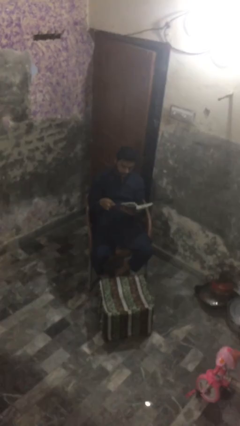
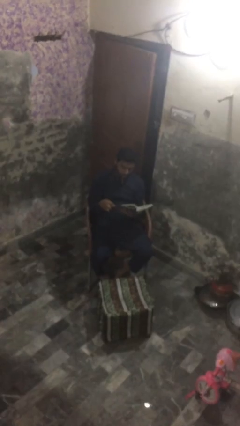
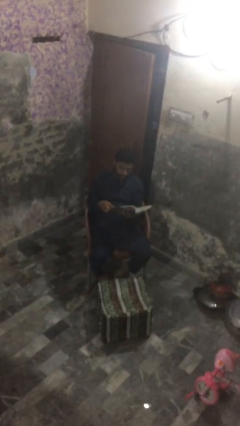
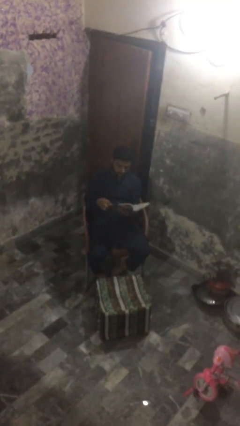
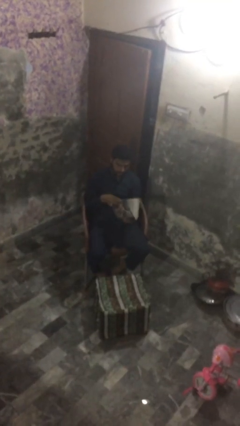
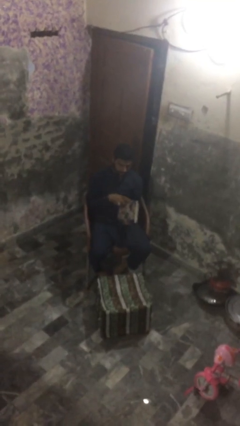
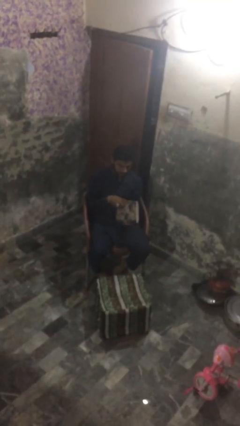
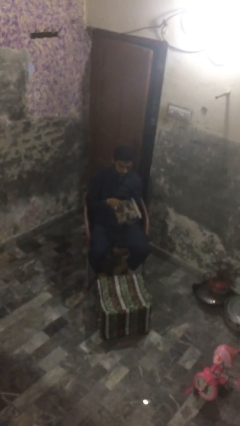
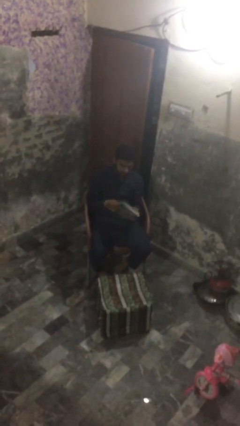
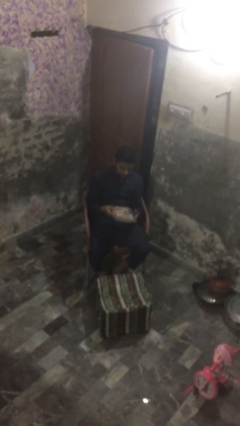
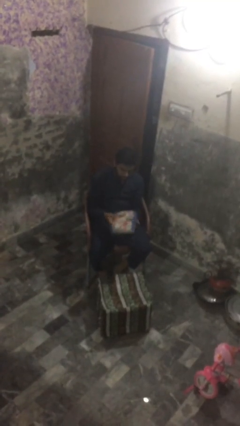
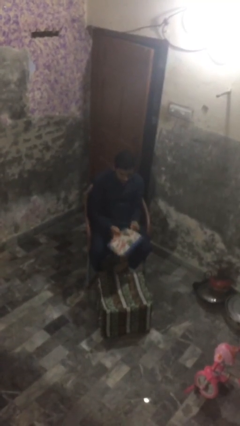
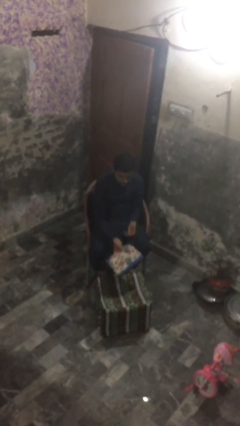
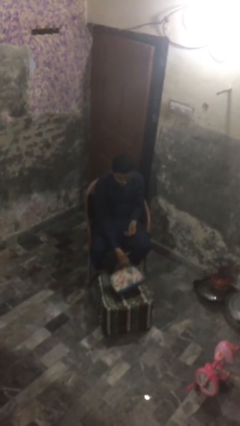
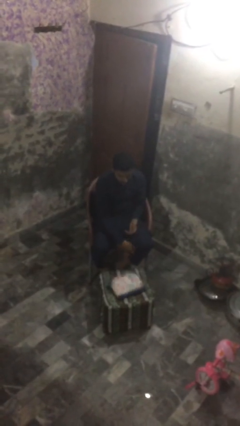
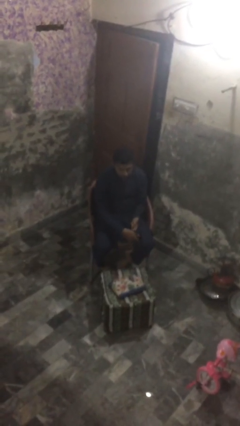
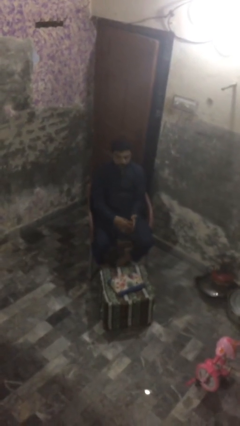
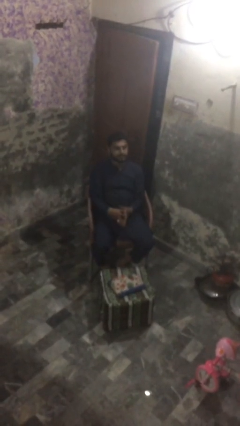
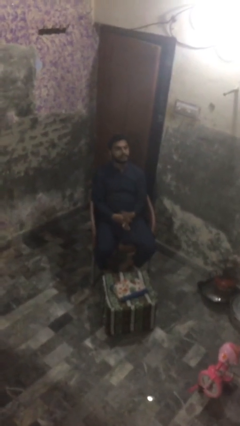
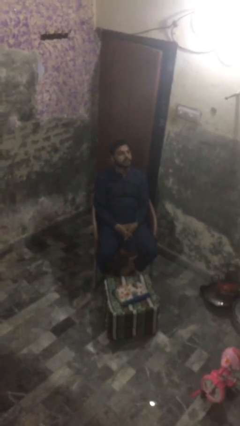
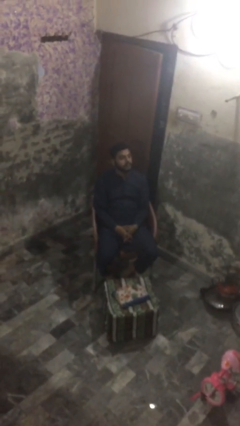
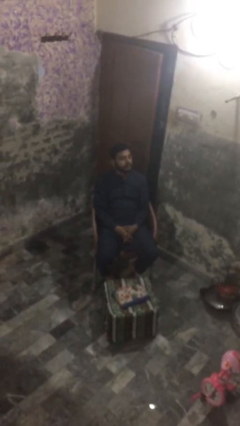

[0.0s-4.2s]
person puts down object on table

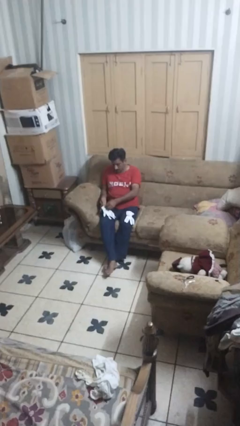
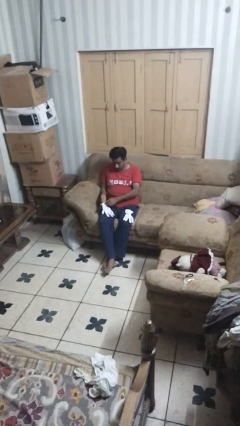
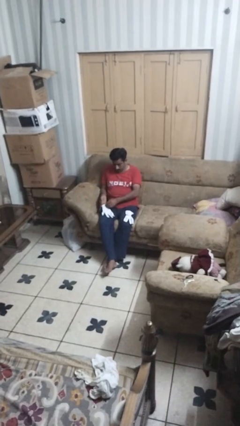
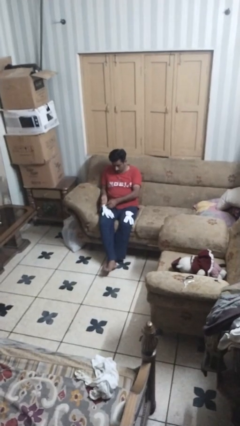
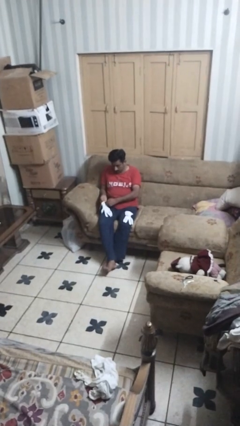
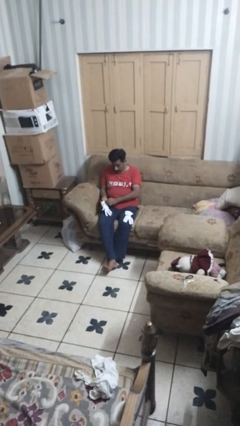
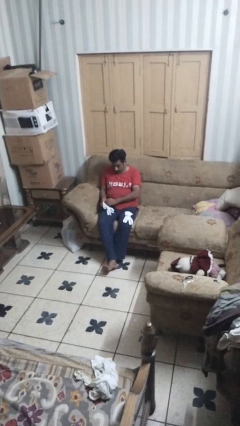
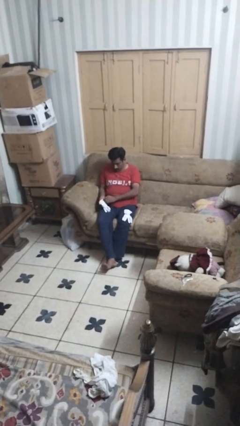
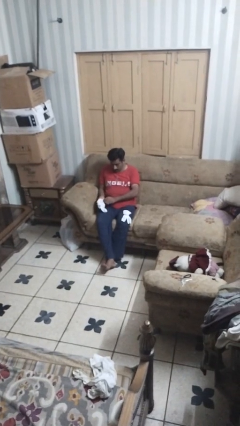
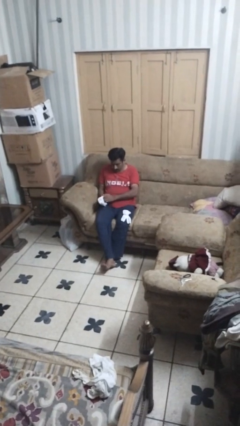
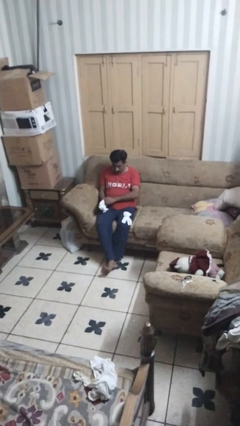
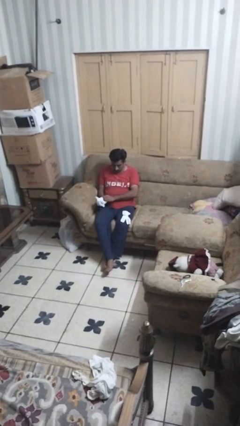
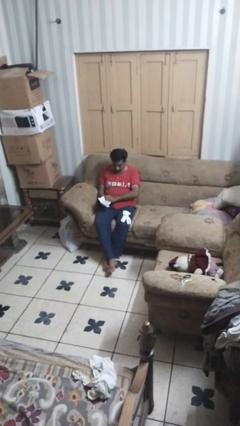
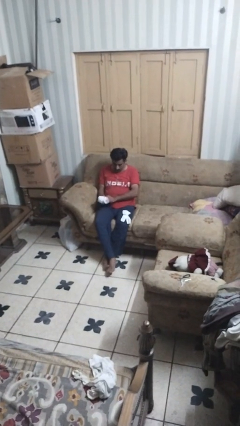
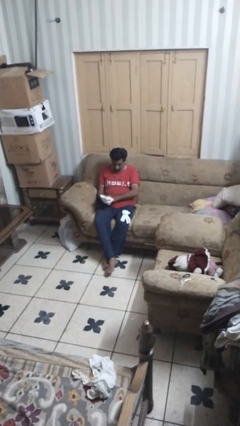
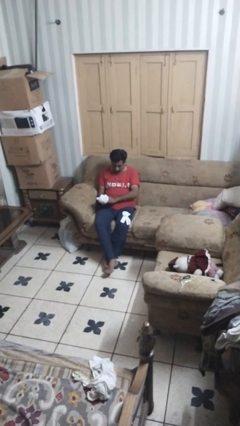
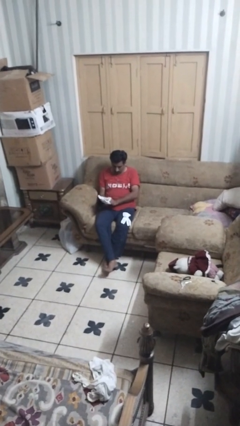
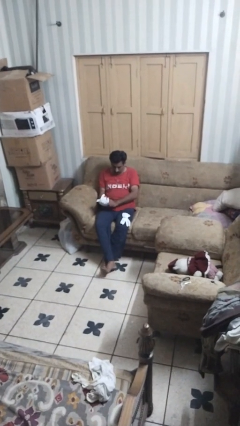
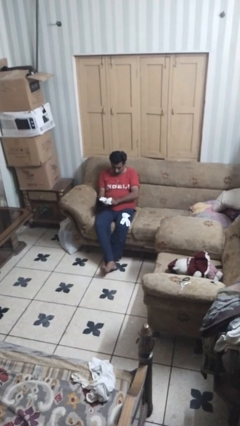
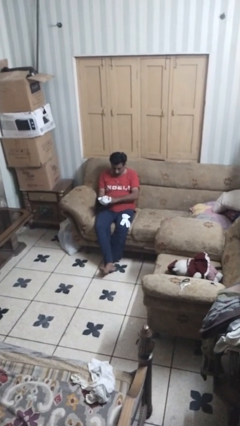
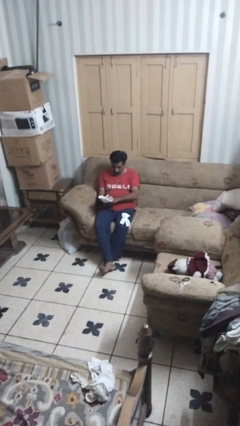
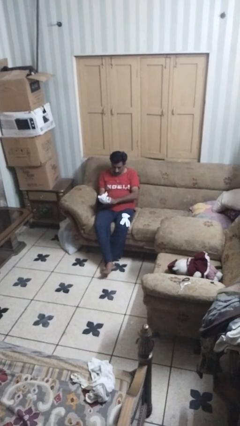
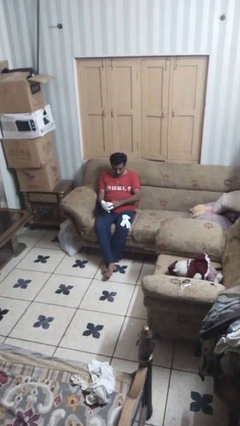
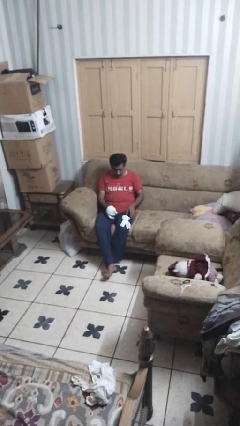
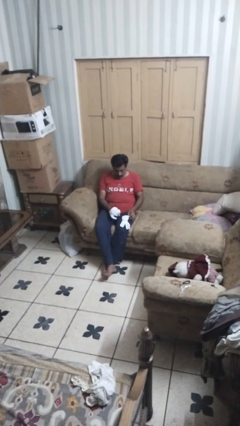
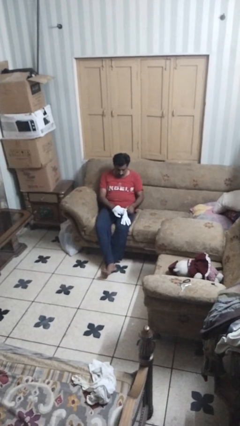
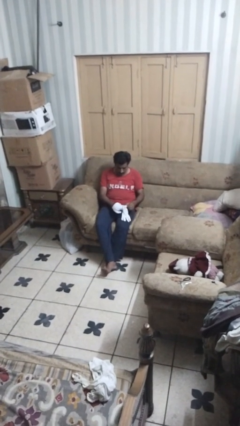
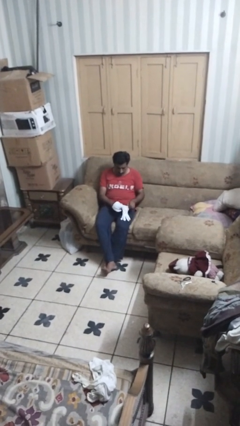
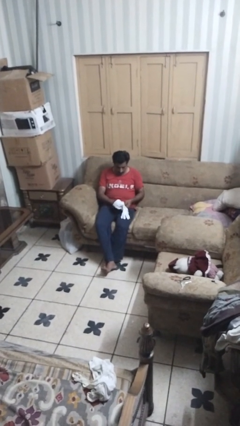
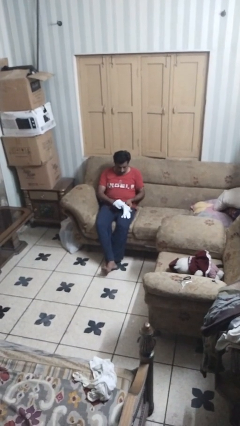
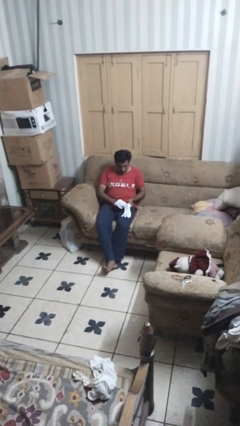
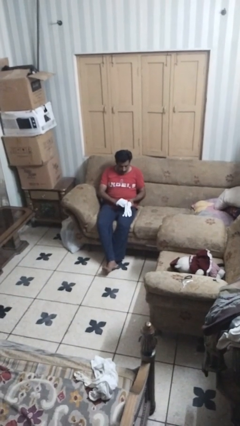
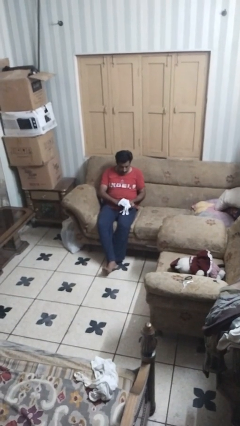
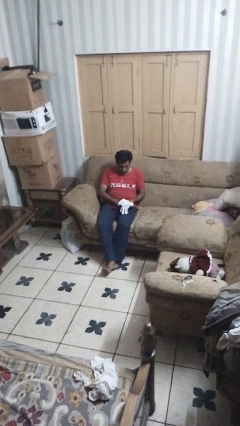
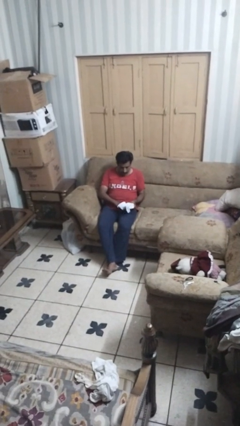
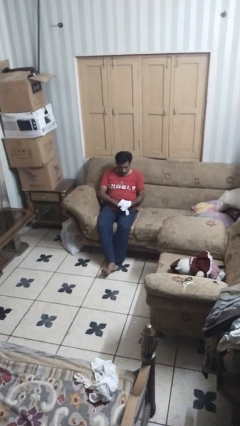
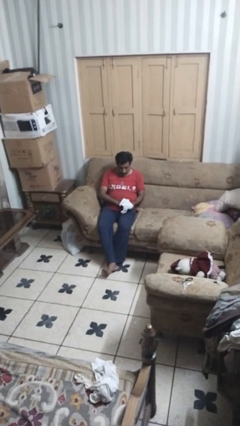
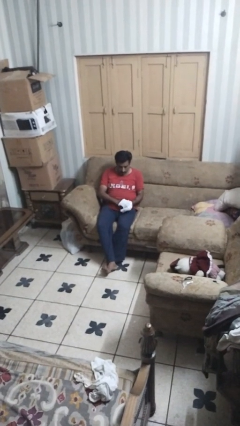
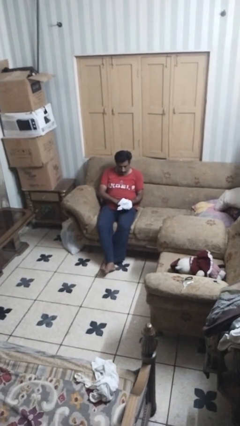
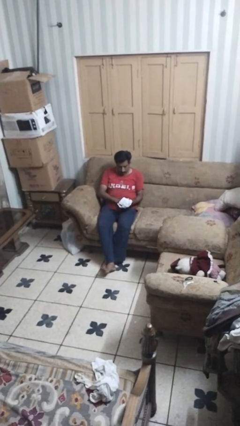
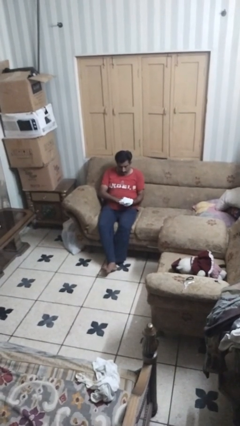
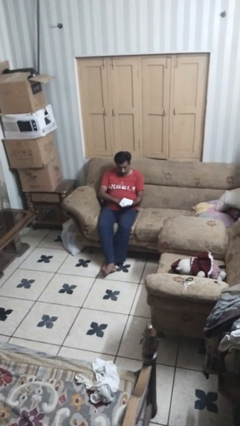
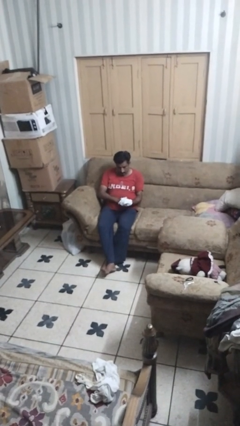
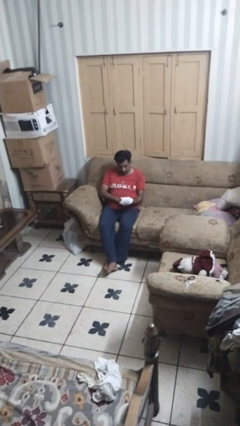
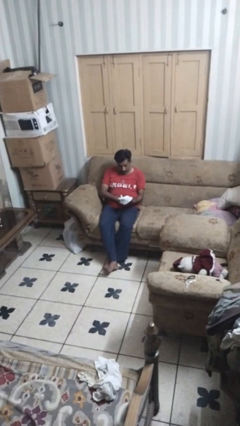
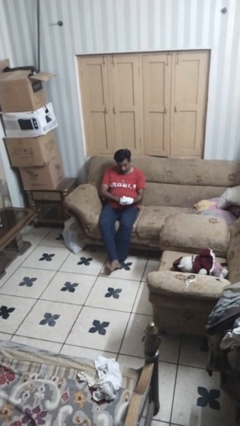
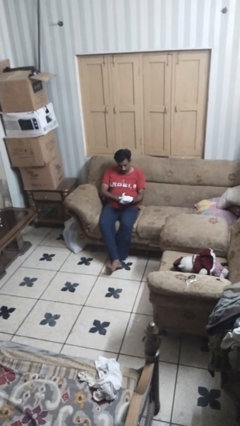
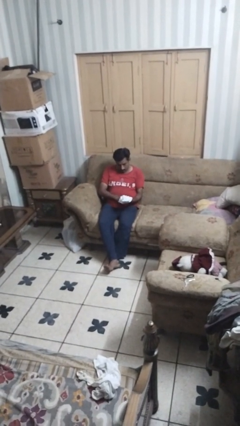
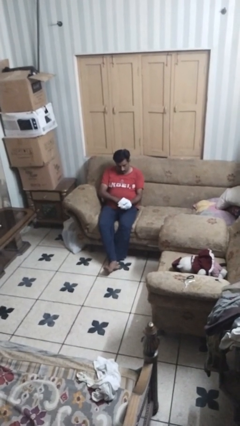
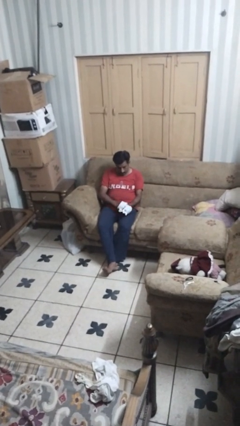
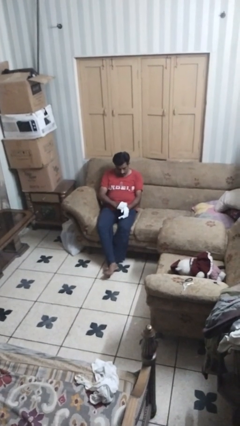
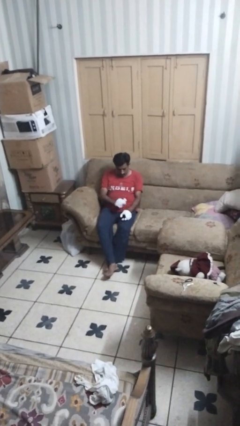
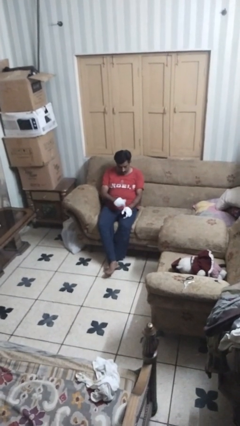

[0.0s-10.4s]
person puts on gloves

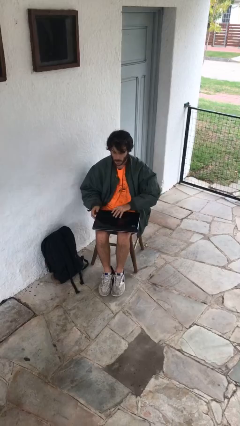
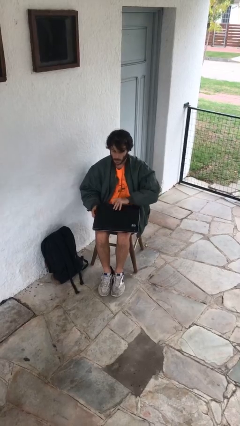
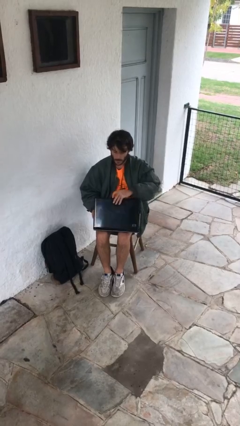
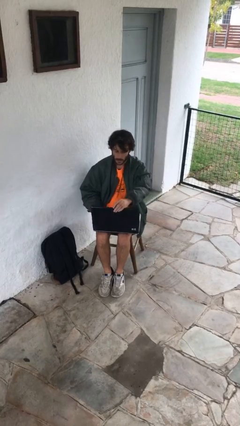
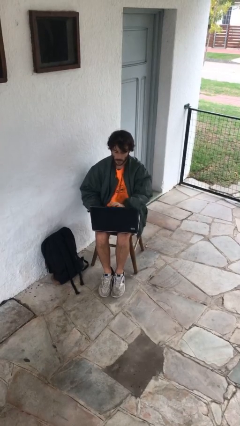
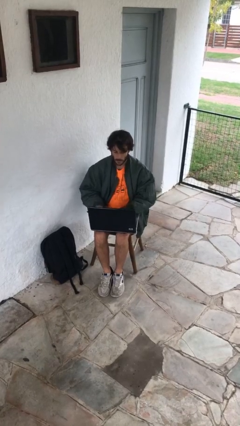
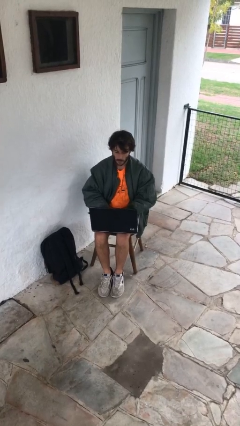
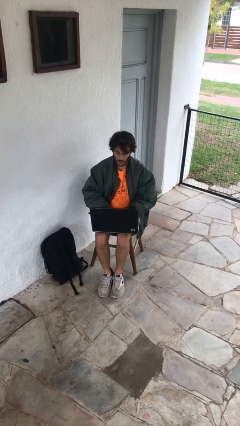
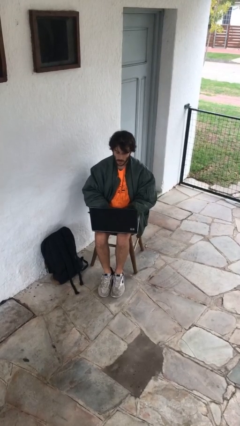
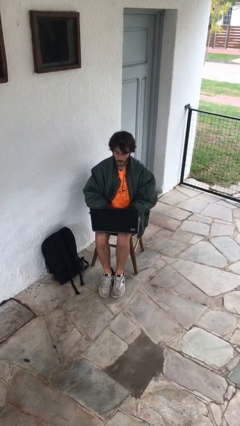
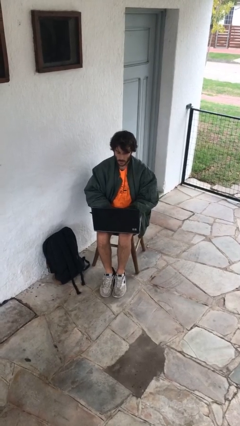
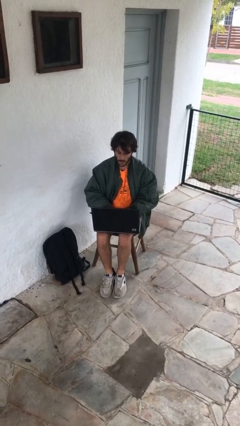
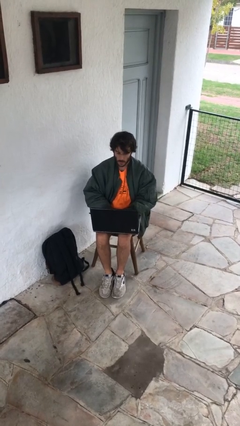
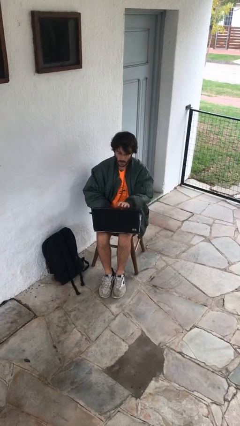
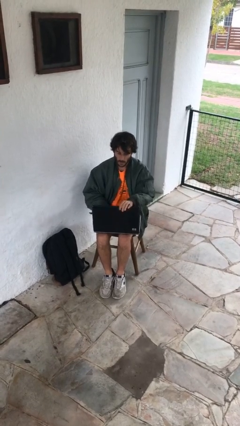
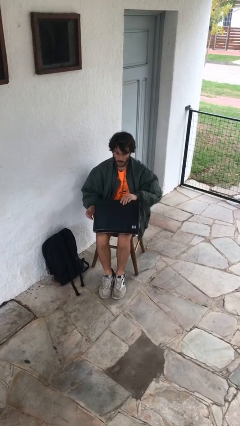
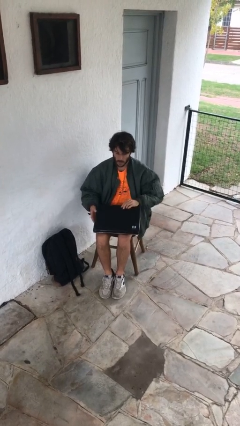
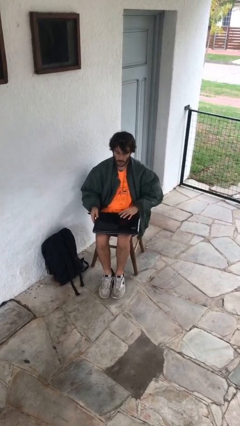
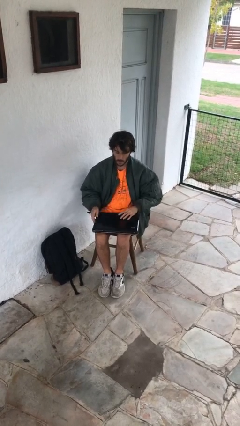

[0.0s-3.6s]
person interacts with laptop
